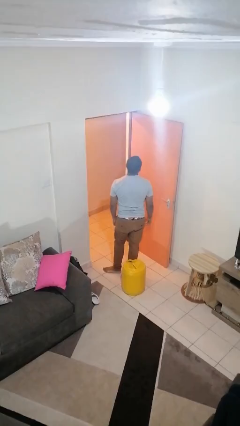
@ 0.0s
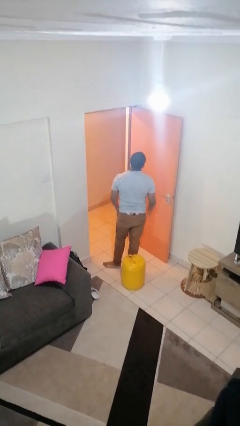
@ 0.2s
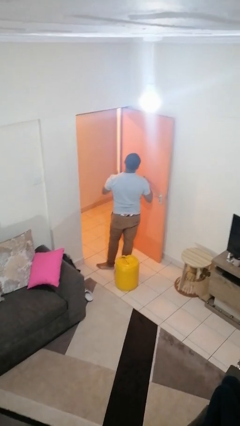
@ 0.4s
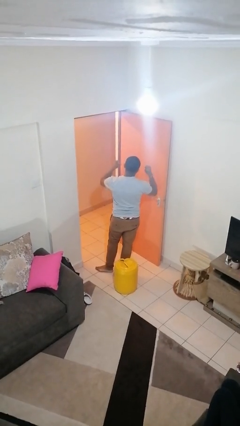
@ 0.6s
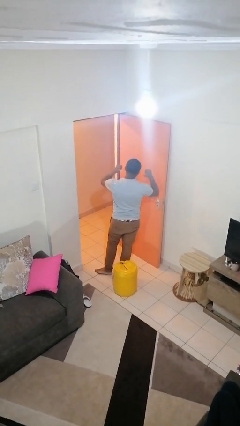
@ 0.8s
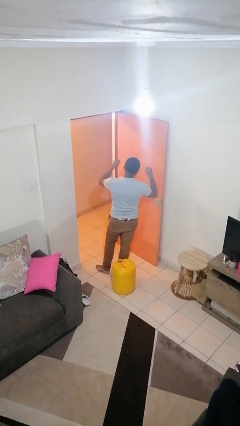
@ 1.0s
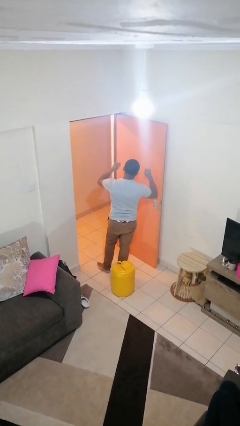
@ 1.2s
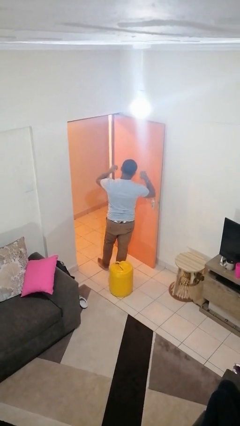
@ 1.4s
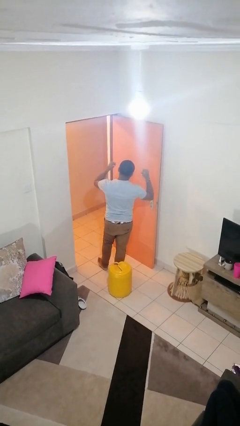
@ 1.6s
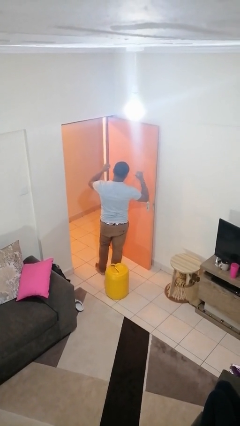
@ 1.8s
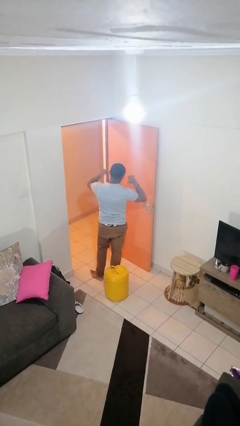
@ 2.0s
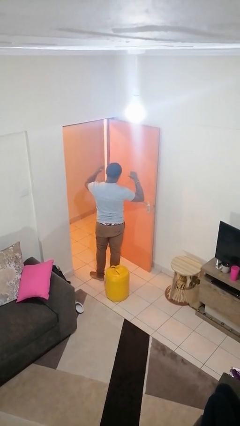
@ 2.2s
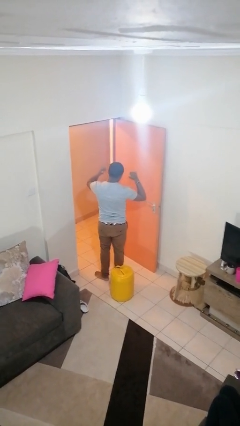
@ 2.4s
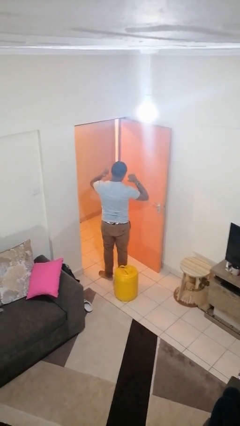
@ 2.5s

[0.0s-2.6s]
person gestures behind me

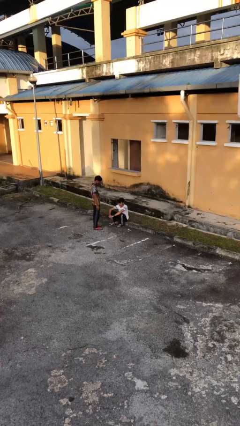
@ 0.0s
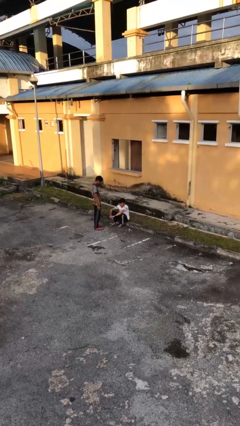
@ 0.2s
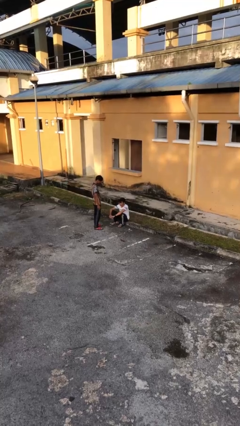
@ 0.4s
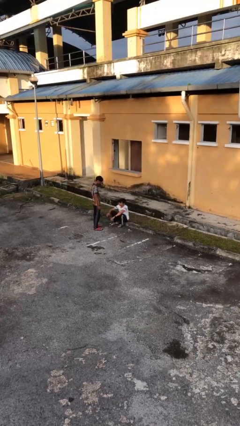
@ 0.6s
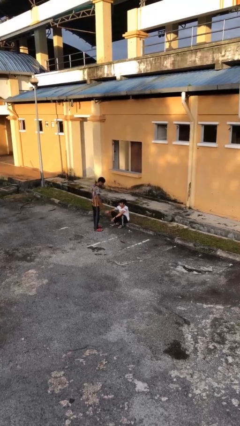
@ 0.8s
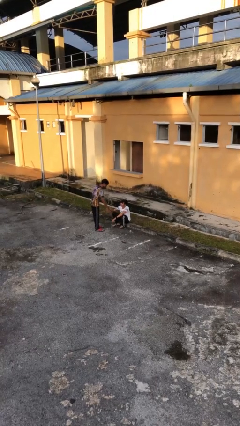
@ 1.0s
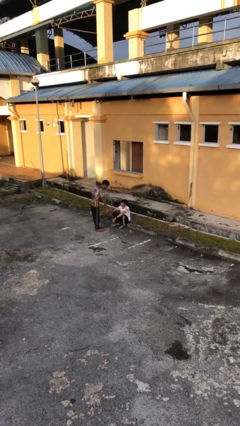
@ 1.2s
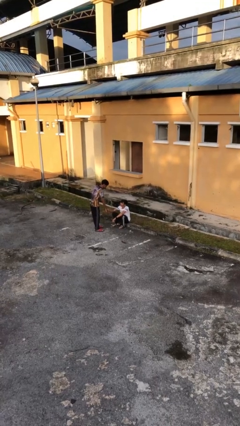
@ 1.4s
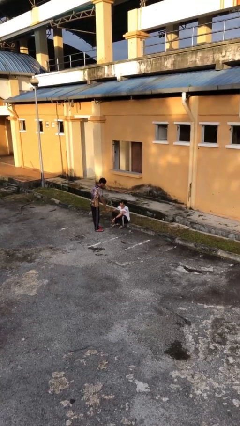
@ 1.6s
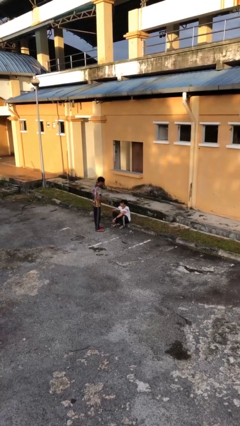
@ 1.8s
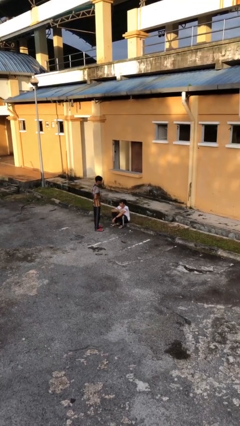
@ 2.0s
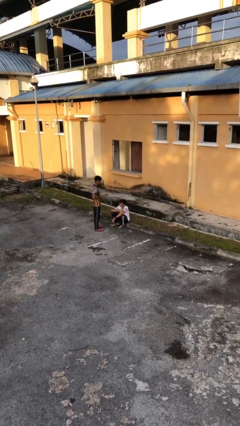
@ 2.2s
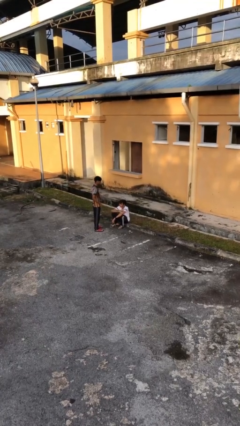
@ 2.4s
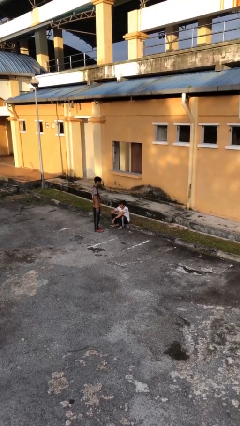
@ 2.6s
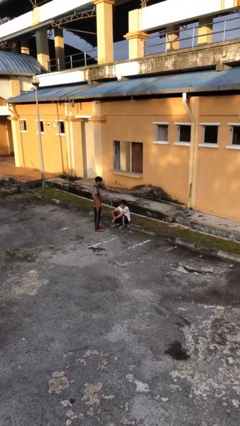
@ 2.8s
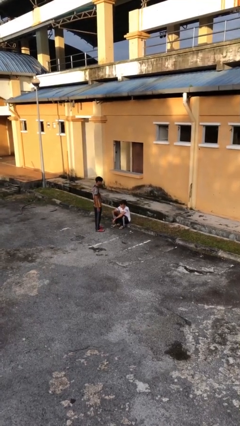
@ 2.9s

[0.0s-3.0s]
person shakes hand

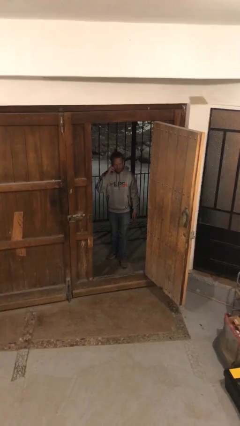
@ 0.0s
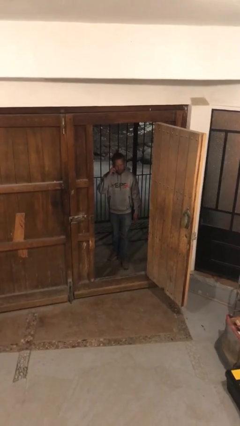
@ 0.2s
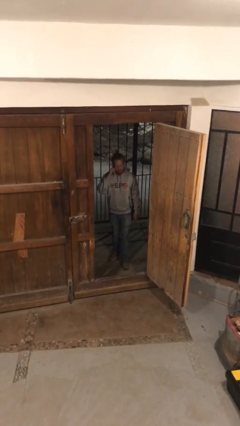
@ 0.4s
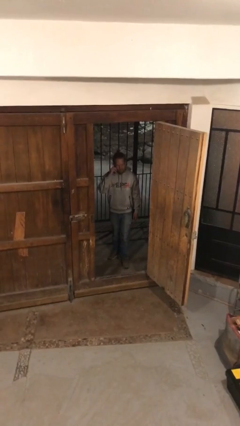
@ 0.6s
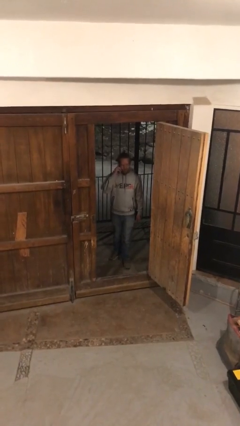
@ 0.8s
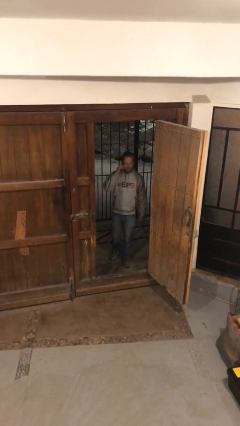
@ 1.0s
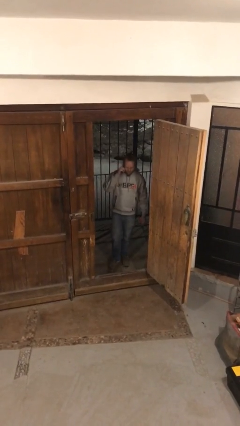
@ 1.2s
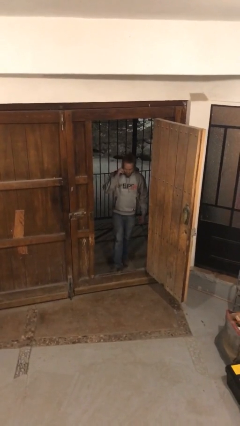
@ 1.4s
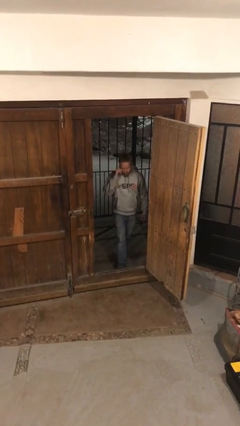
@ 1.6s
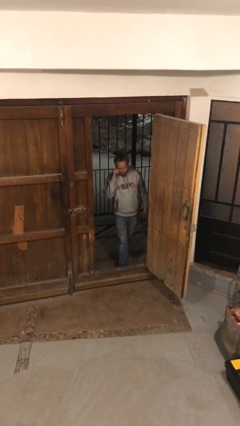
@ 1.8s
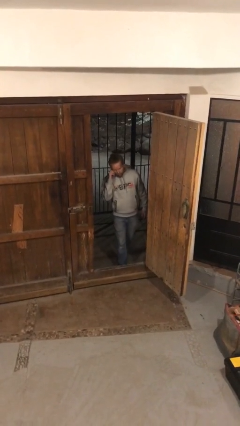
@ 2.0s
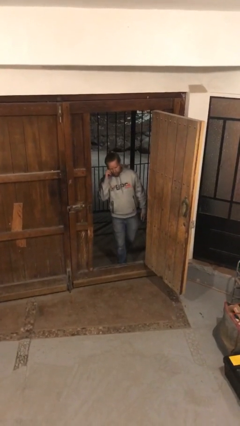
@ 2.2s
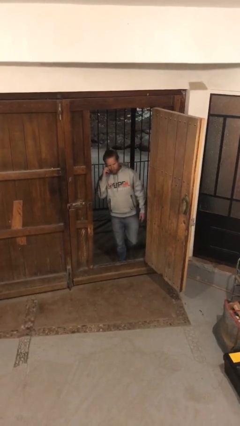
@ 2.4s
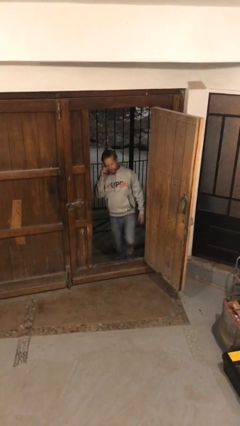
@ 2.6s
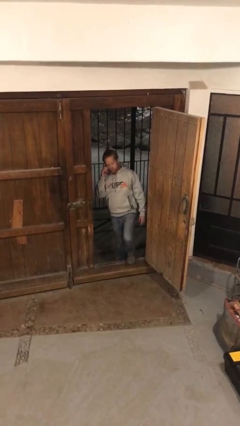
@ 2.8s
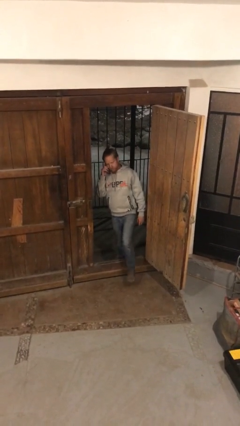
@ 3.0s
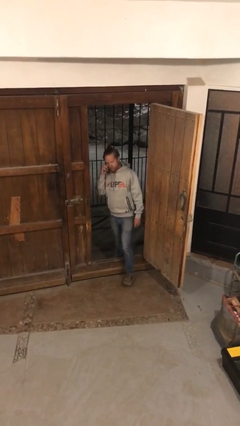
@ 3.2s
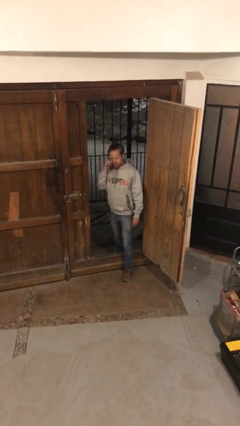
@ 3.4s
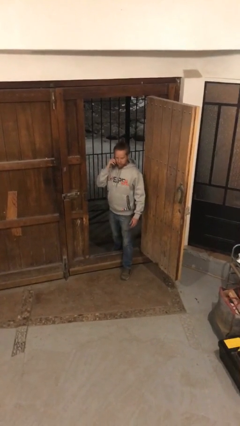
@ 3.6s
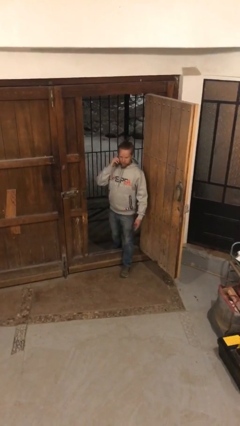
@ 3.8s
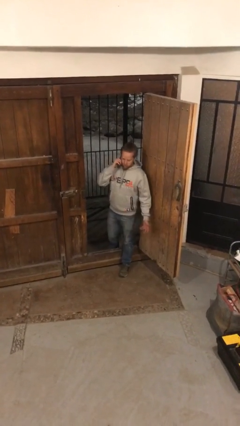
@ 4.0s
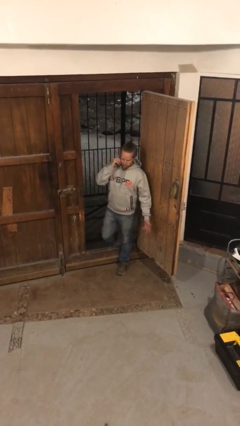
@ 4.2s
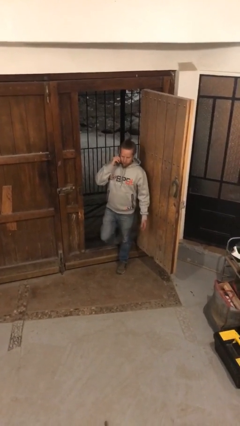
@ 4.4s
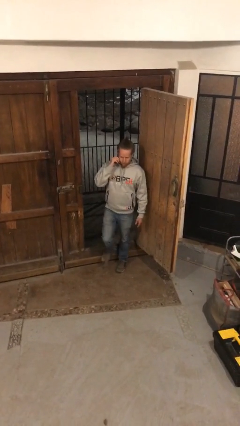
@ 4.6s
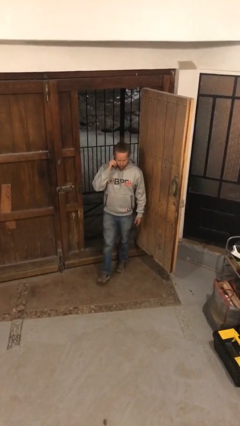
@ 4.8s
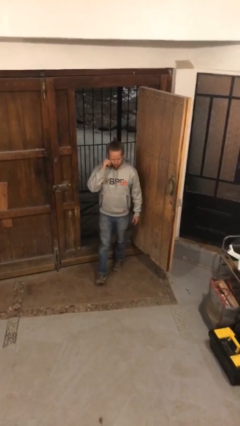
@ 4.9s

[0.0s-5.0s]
person enters scene through structure

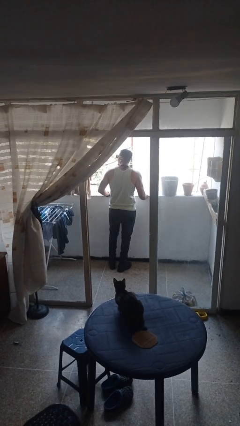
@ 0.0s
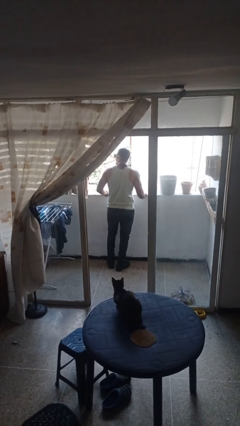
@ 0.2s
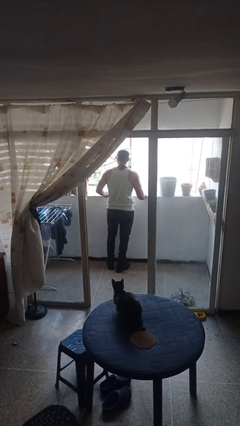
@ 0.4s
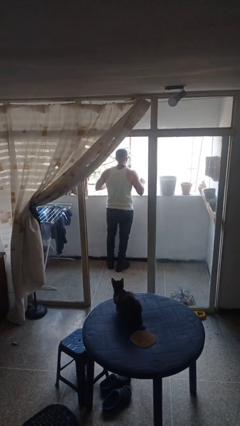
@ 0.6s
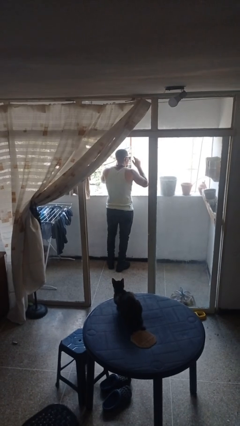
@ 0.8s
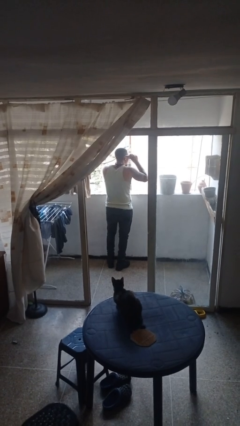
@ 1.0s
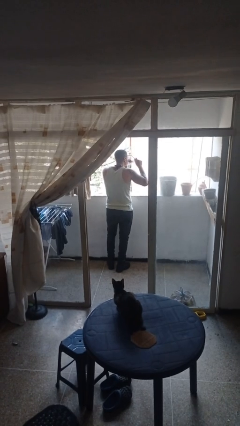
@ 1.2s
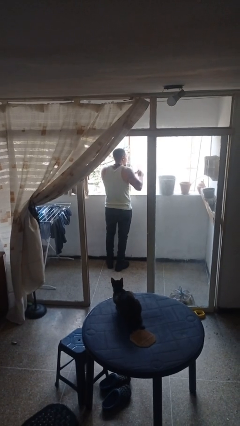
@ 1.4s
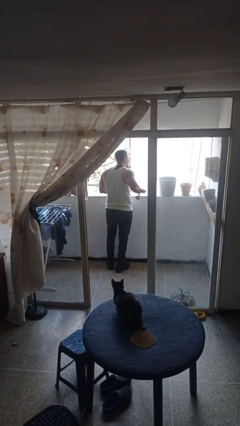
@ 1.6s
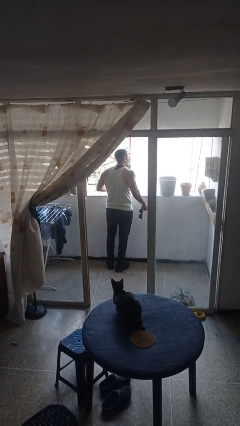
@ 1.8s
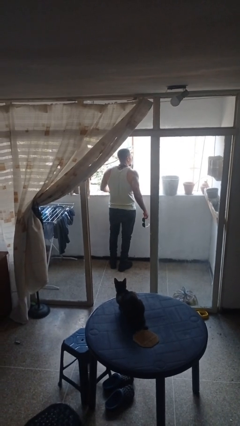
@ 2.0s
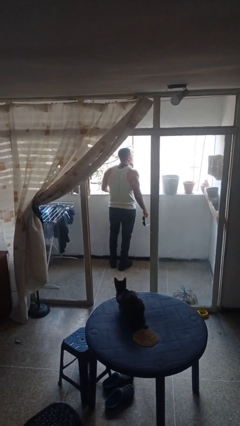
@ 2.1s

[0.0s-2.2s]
person takes off sunglasses

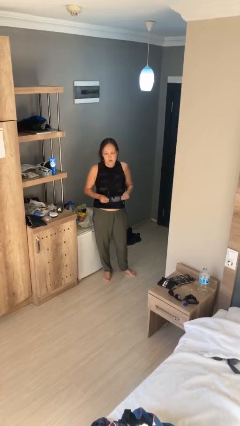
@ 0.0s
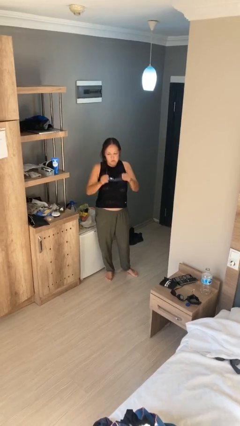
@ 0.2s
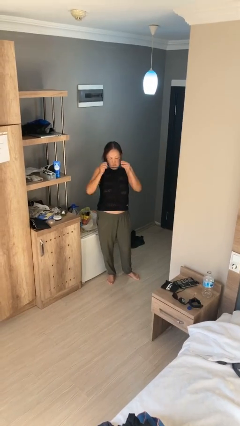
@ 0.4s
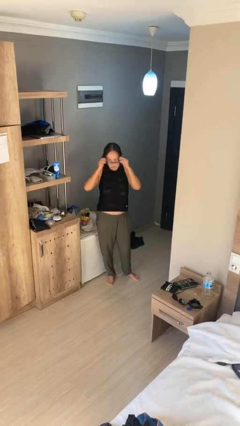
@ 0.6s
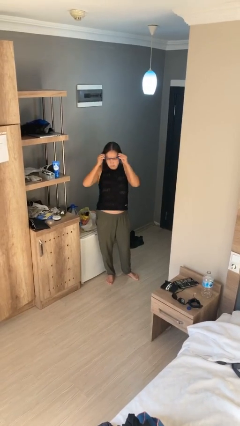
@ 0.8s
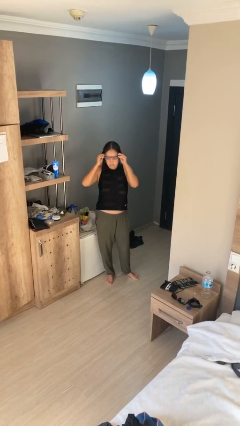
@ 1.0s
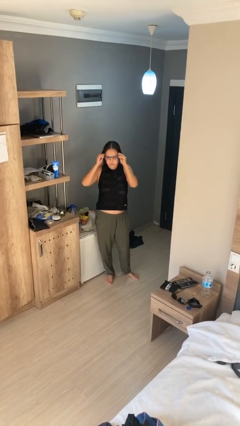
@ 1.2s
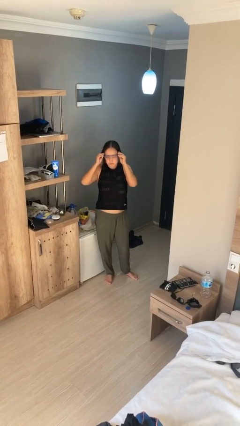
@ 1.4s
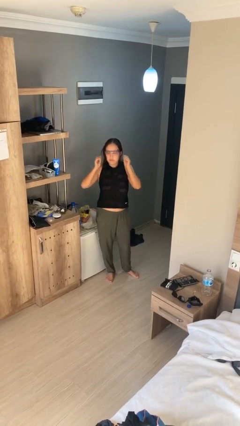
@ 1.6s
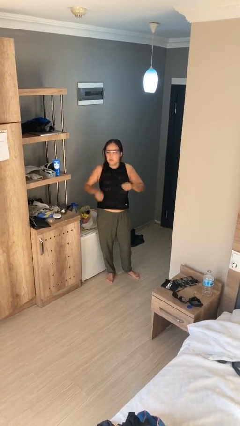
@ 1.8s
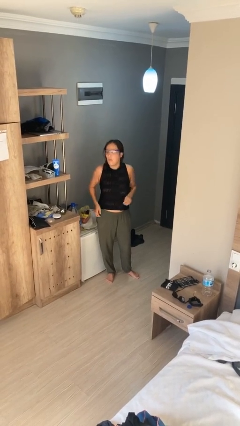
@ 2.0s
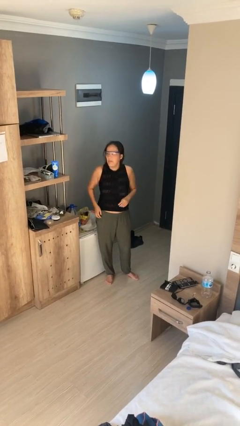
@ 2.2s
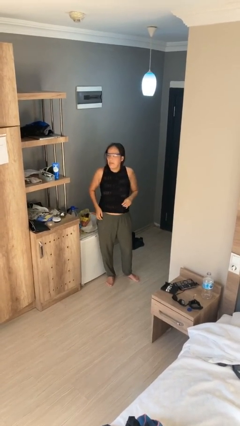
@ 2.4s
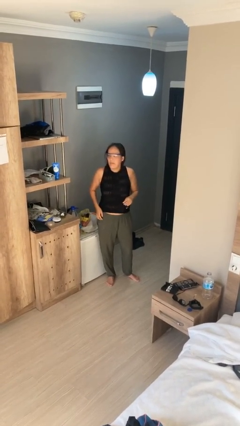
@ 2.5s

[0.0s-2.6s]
person puts on glasses

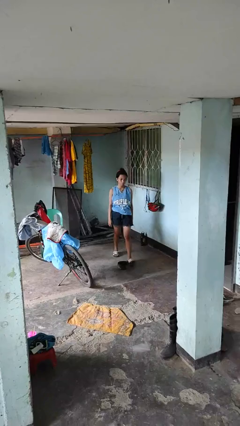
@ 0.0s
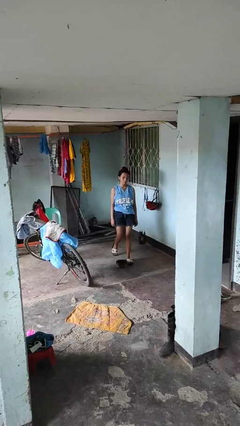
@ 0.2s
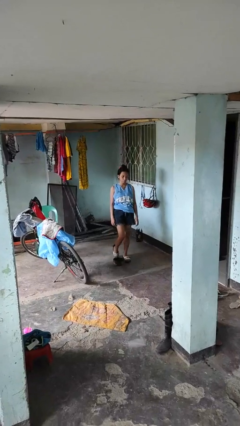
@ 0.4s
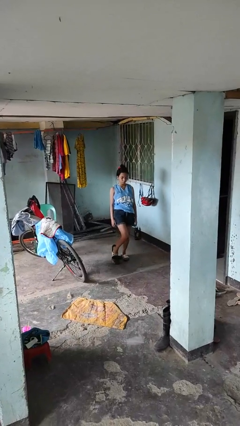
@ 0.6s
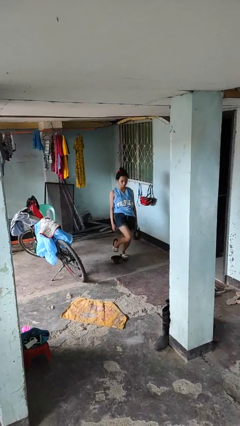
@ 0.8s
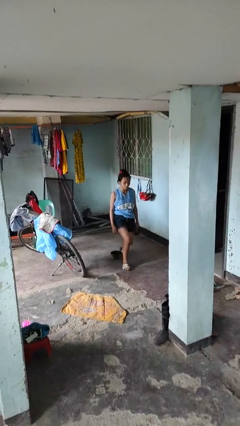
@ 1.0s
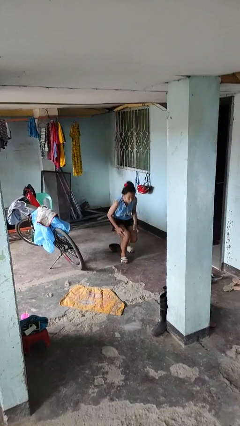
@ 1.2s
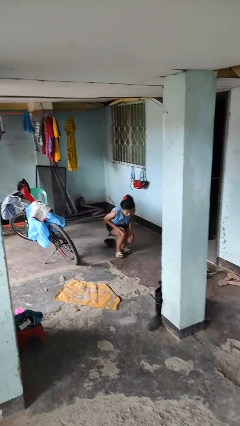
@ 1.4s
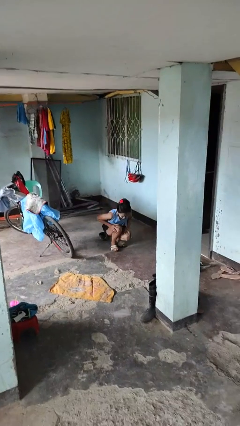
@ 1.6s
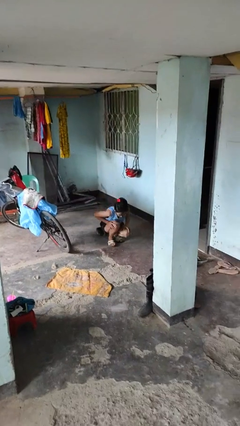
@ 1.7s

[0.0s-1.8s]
person trips on object on floor

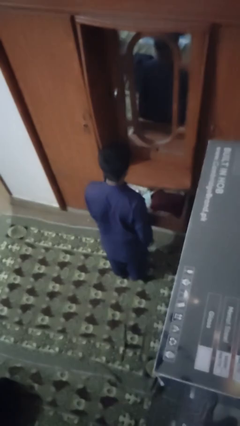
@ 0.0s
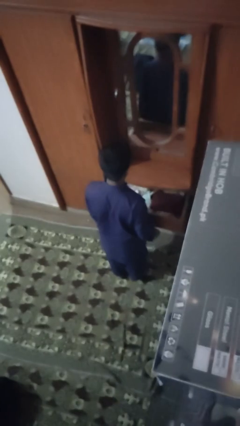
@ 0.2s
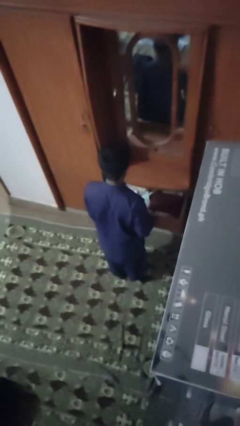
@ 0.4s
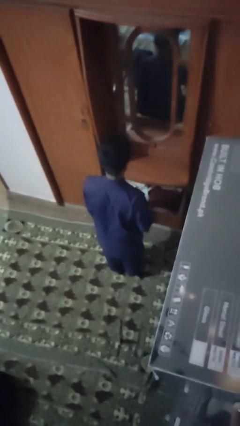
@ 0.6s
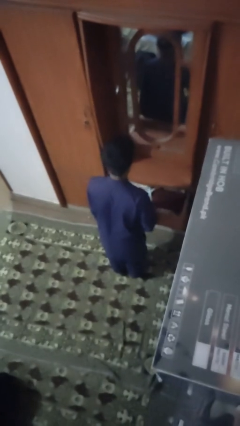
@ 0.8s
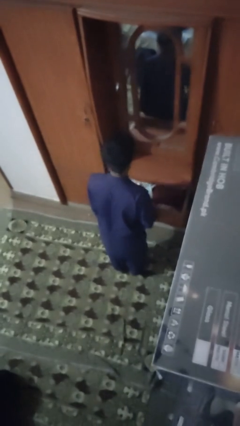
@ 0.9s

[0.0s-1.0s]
person opens dresser drawer
